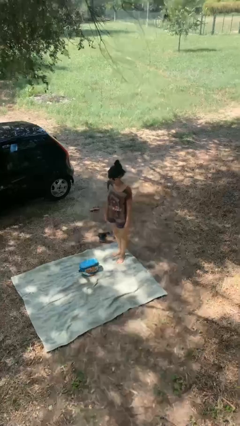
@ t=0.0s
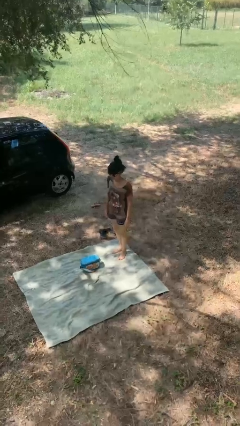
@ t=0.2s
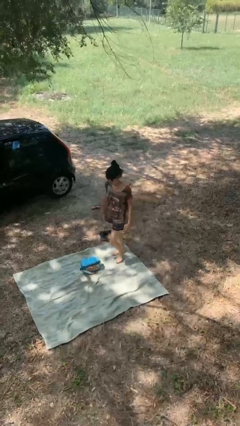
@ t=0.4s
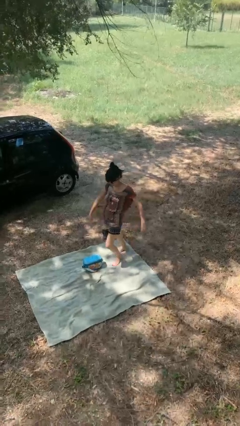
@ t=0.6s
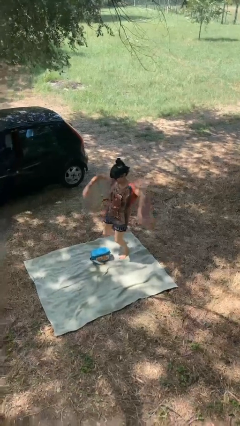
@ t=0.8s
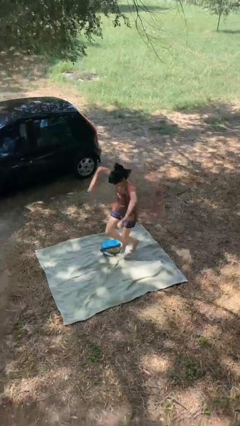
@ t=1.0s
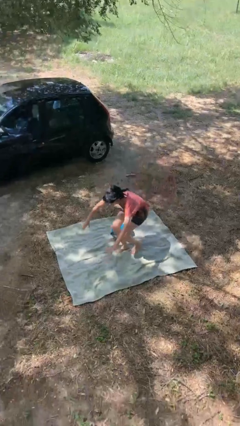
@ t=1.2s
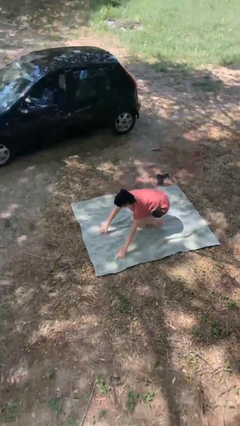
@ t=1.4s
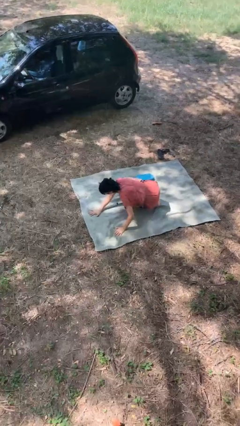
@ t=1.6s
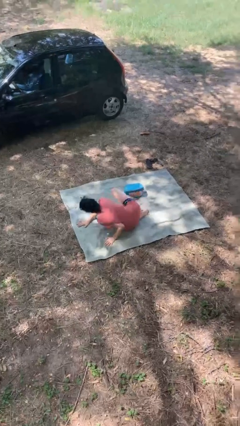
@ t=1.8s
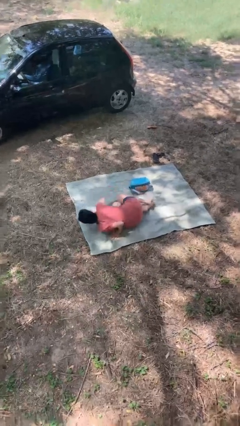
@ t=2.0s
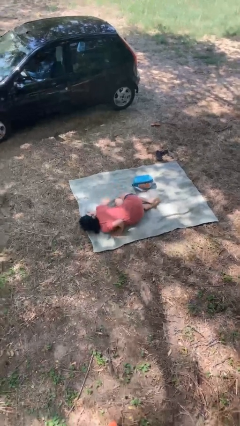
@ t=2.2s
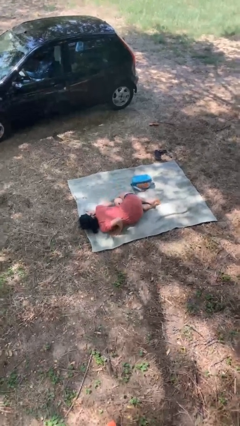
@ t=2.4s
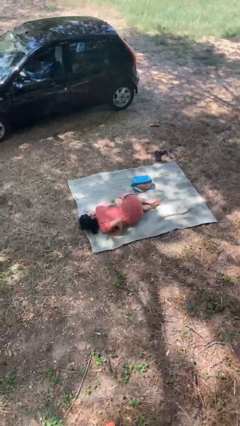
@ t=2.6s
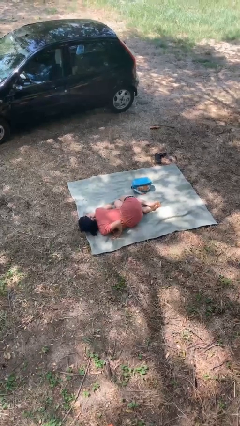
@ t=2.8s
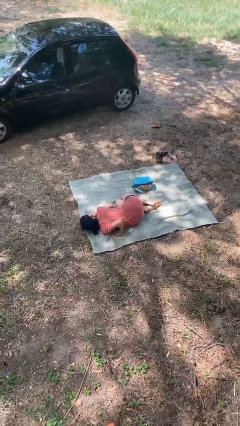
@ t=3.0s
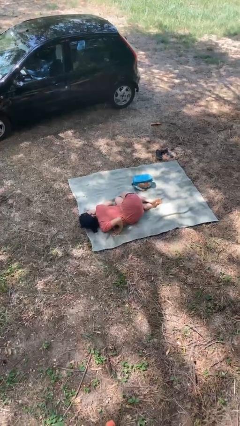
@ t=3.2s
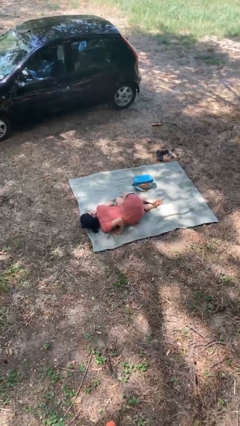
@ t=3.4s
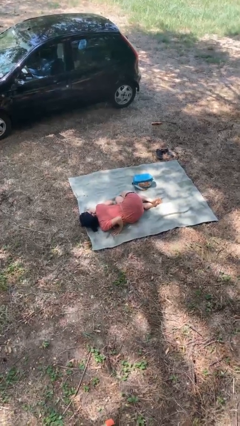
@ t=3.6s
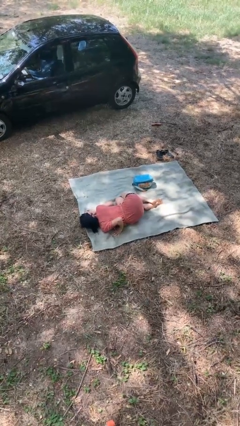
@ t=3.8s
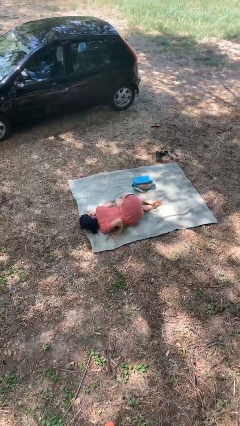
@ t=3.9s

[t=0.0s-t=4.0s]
person trips on object on floor

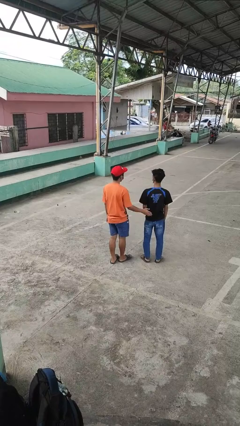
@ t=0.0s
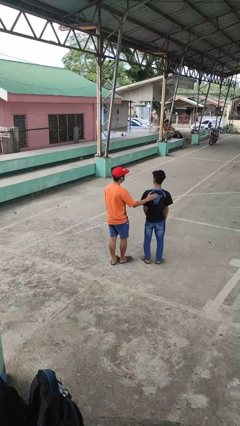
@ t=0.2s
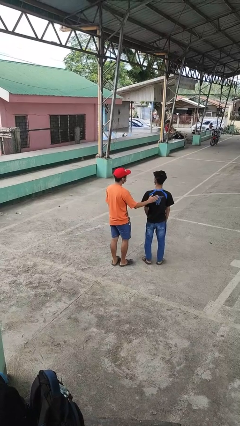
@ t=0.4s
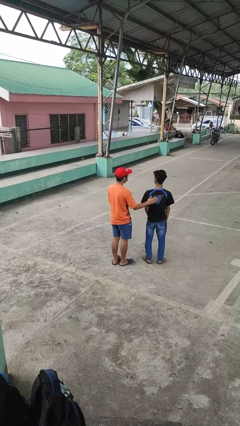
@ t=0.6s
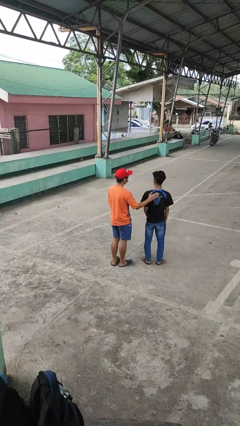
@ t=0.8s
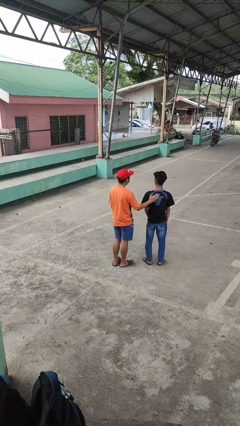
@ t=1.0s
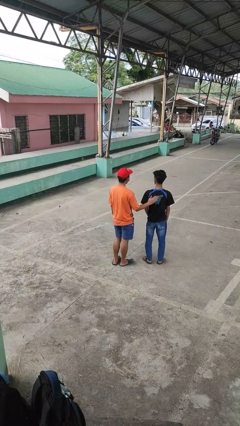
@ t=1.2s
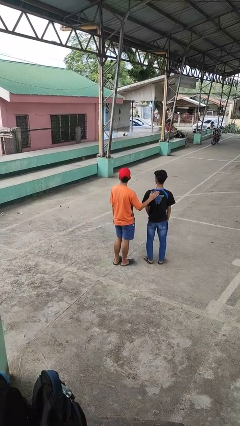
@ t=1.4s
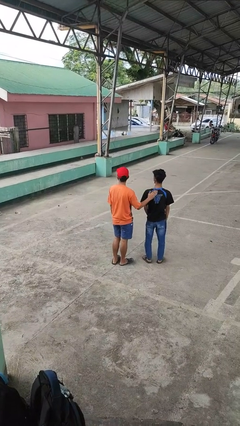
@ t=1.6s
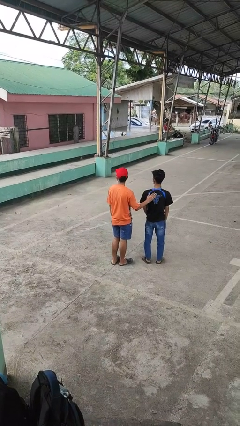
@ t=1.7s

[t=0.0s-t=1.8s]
person touches back of person

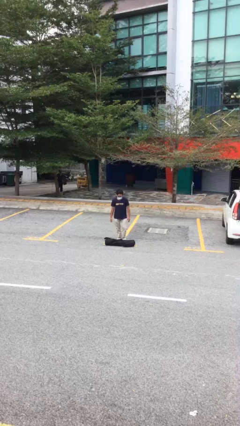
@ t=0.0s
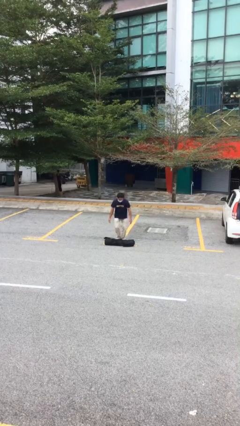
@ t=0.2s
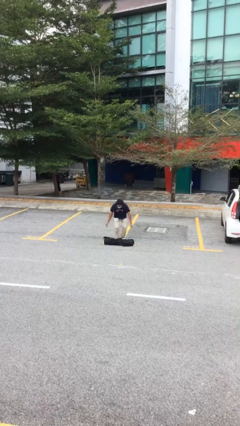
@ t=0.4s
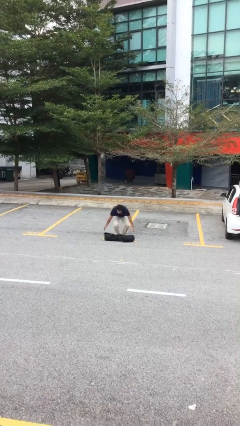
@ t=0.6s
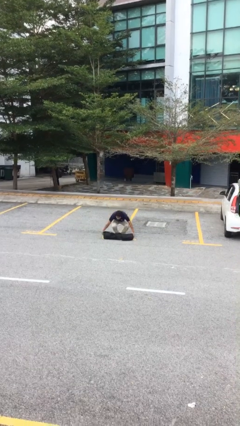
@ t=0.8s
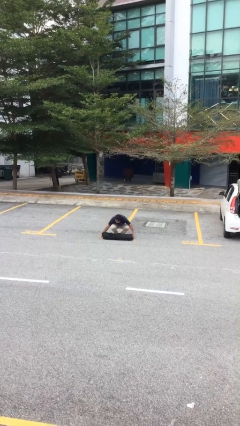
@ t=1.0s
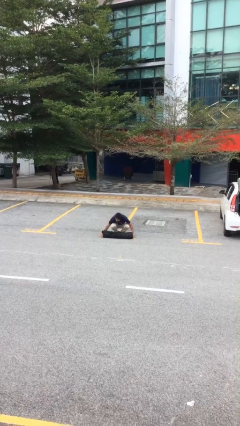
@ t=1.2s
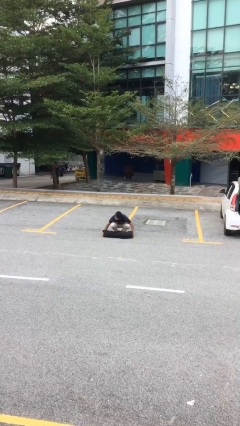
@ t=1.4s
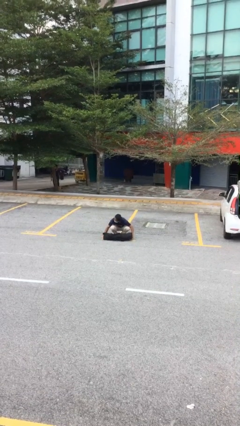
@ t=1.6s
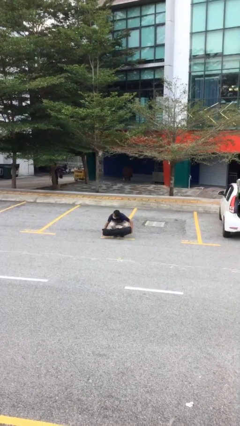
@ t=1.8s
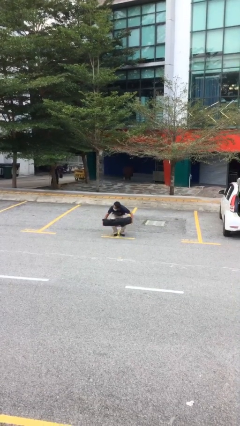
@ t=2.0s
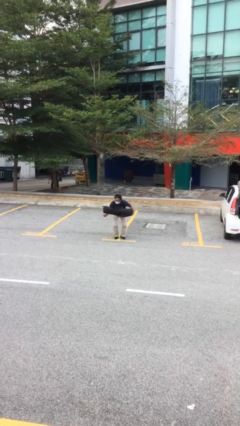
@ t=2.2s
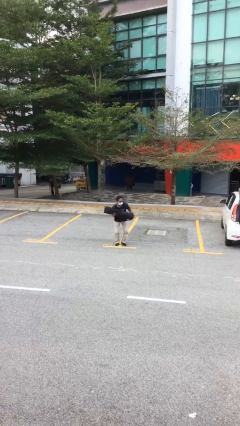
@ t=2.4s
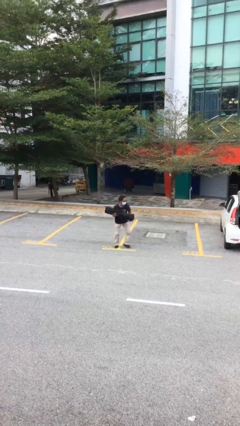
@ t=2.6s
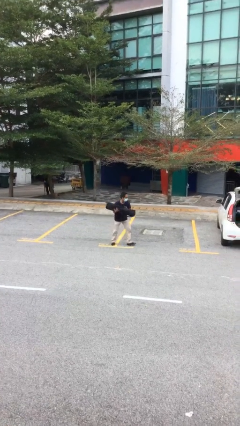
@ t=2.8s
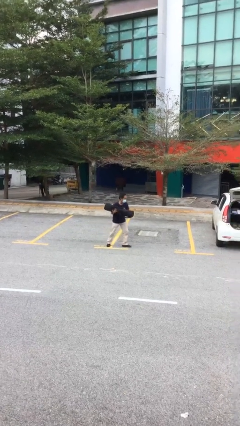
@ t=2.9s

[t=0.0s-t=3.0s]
person picks up object from floor

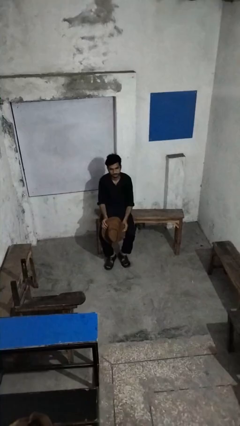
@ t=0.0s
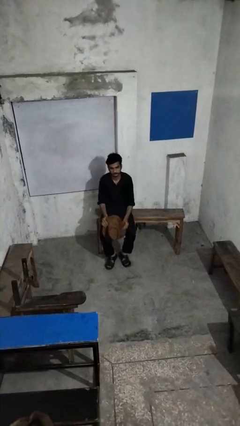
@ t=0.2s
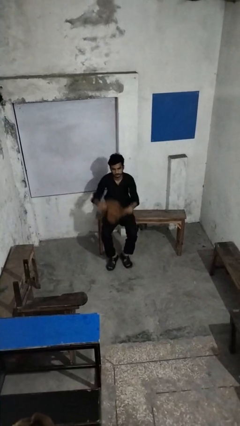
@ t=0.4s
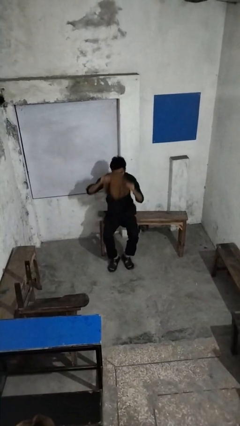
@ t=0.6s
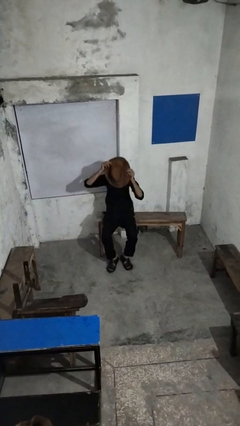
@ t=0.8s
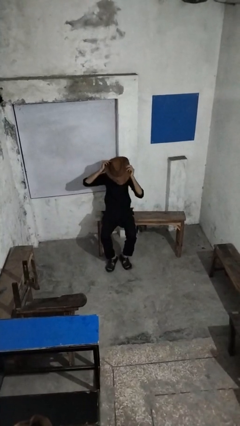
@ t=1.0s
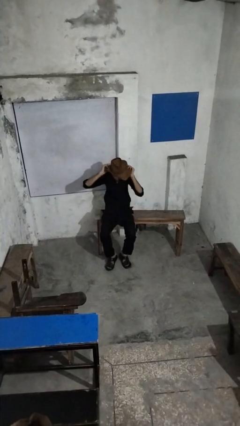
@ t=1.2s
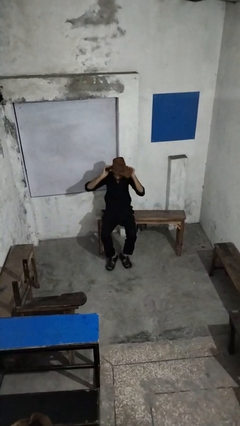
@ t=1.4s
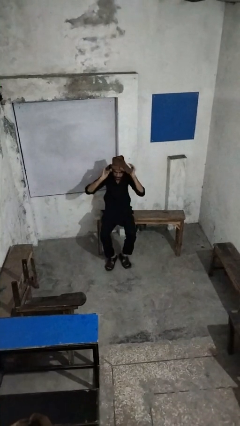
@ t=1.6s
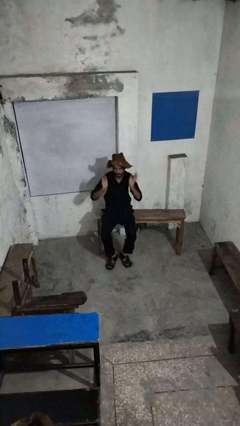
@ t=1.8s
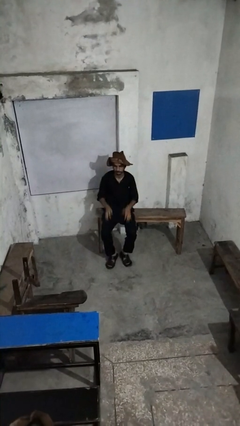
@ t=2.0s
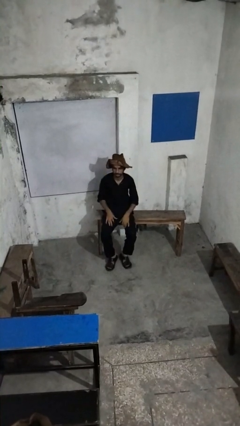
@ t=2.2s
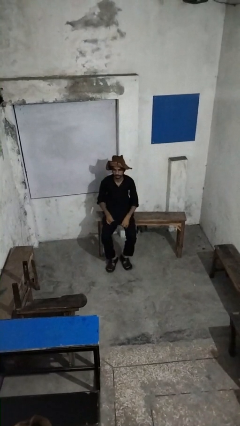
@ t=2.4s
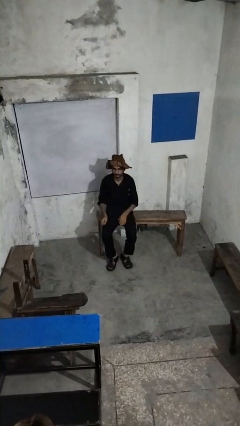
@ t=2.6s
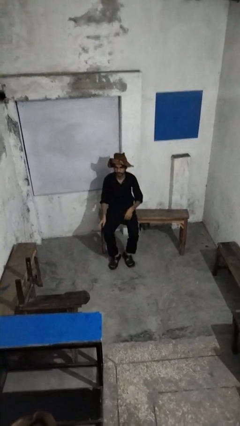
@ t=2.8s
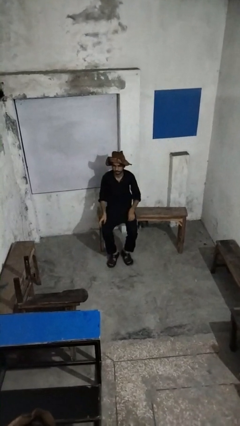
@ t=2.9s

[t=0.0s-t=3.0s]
person puts on hat

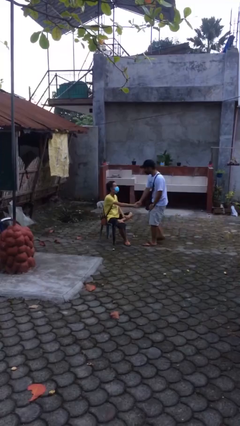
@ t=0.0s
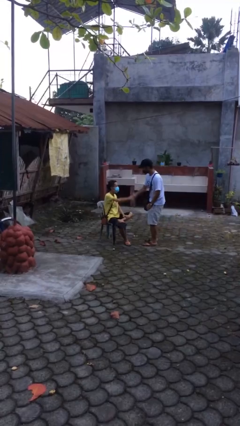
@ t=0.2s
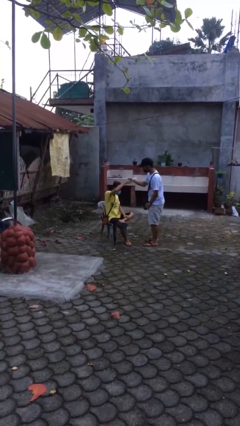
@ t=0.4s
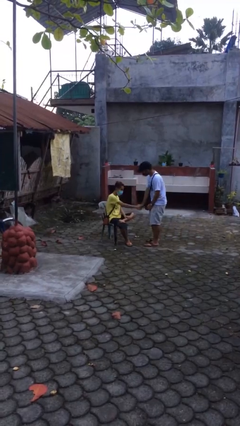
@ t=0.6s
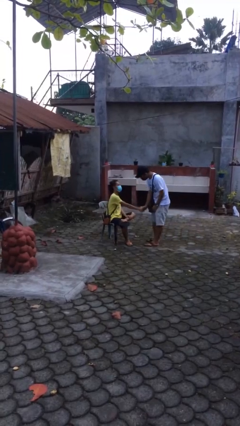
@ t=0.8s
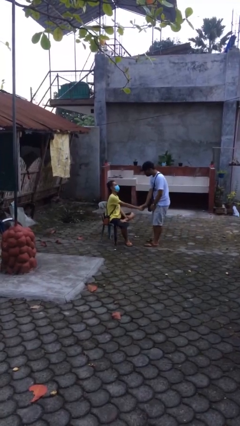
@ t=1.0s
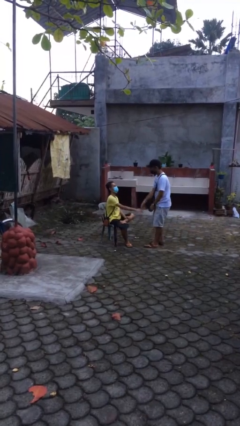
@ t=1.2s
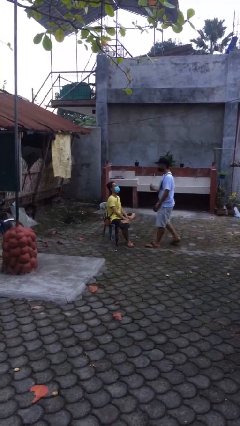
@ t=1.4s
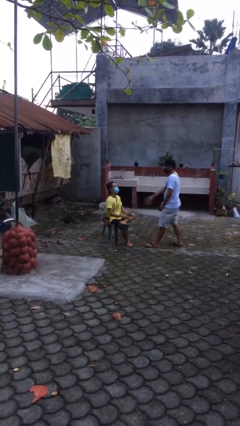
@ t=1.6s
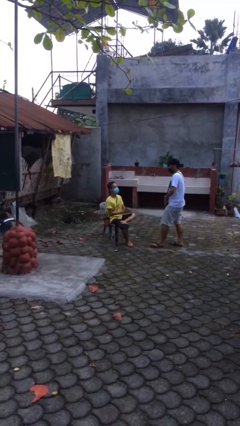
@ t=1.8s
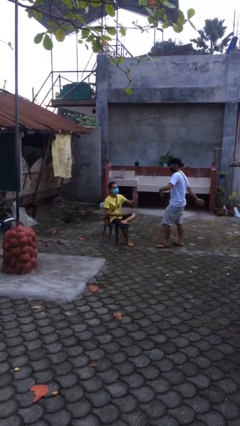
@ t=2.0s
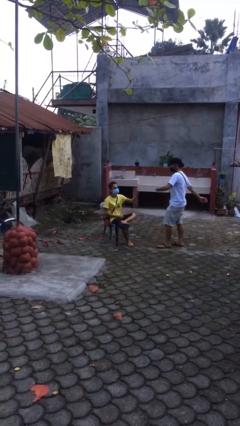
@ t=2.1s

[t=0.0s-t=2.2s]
person shakes hand

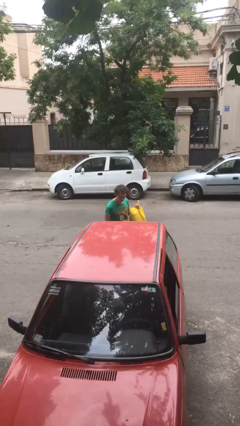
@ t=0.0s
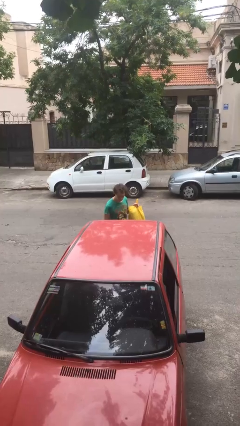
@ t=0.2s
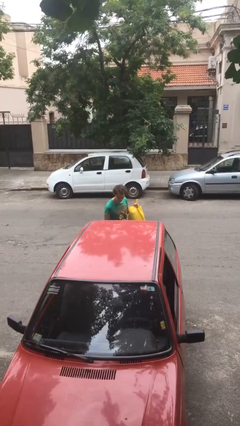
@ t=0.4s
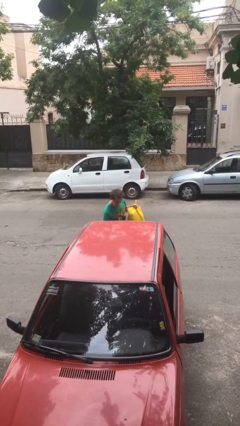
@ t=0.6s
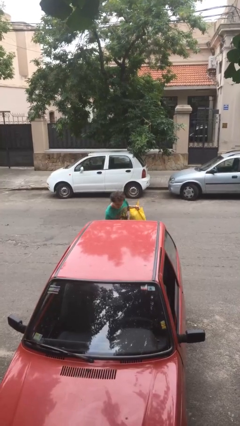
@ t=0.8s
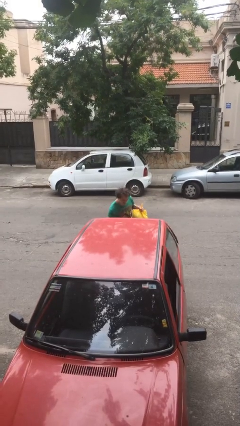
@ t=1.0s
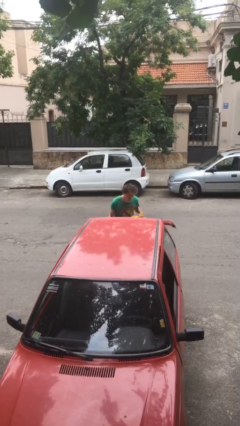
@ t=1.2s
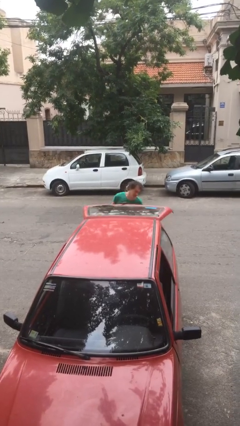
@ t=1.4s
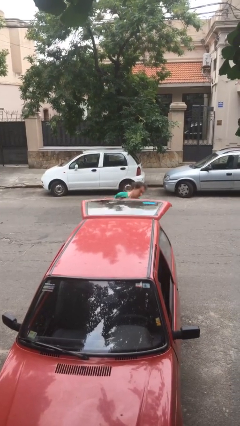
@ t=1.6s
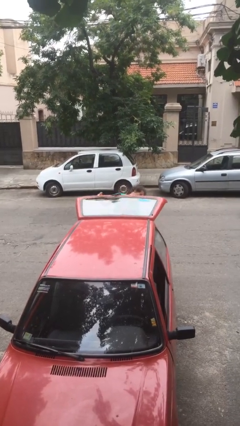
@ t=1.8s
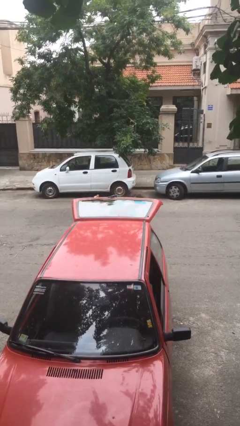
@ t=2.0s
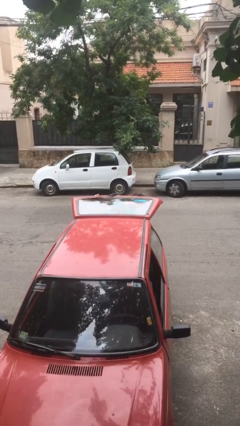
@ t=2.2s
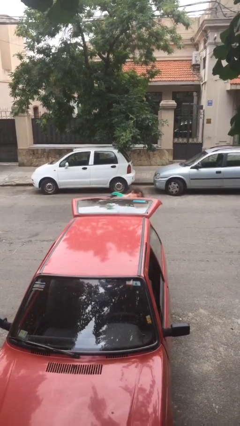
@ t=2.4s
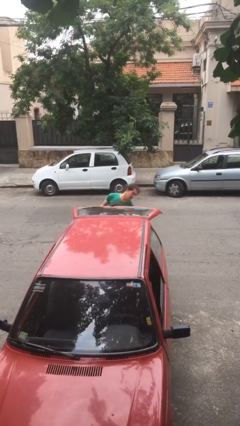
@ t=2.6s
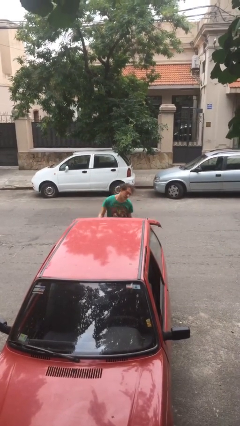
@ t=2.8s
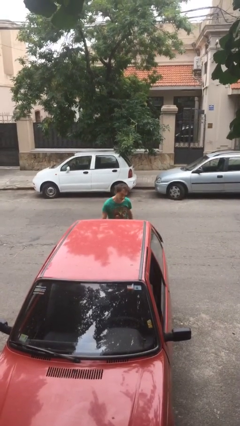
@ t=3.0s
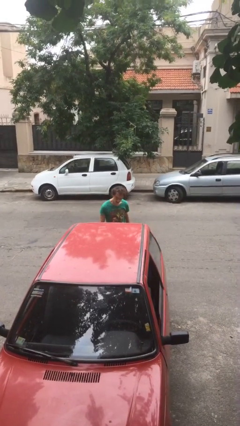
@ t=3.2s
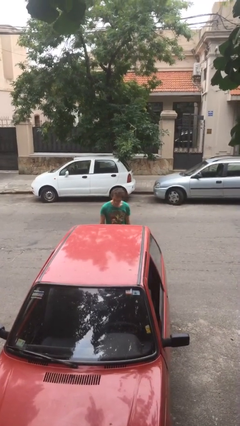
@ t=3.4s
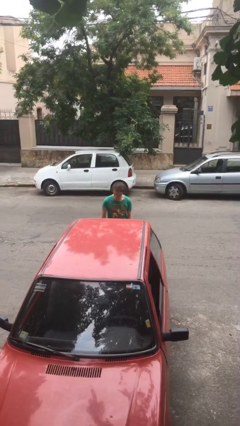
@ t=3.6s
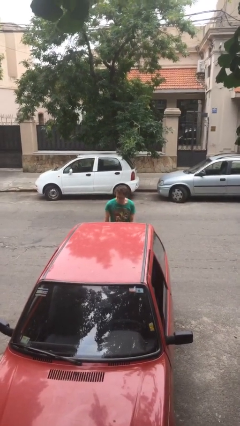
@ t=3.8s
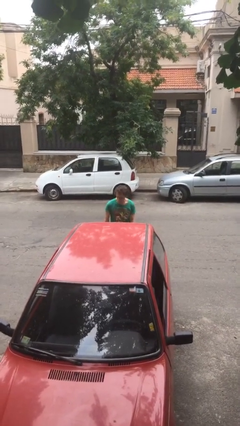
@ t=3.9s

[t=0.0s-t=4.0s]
person loads car
